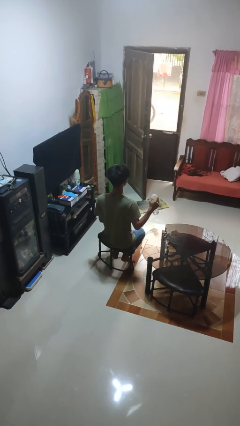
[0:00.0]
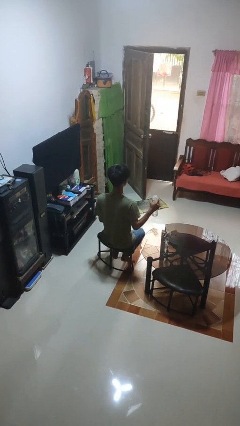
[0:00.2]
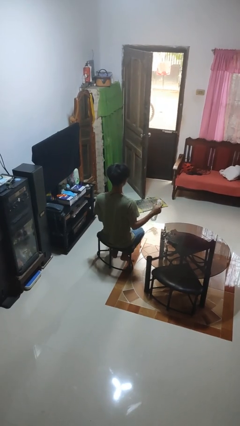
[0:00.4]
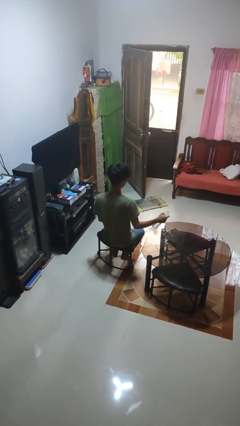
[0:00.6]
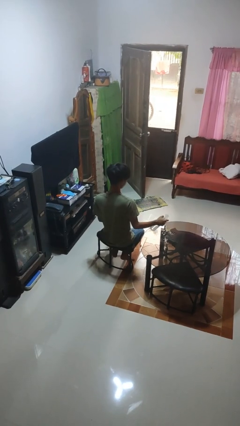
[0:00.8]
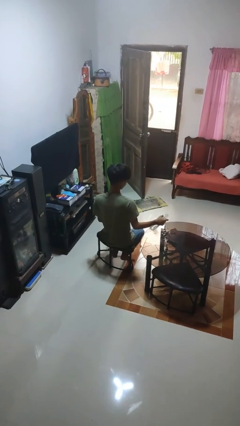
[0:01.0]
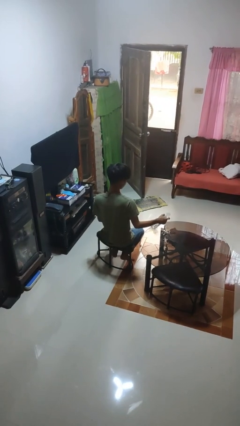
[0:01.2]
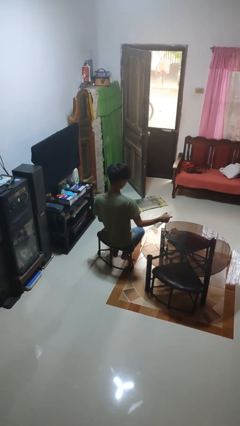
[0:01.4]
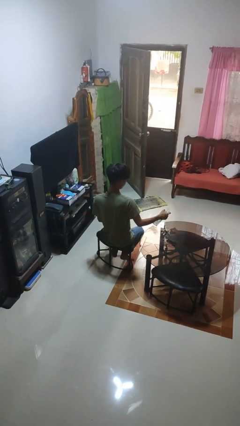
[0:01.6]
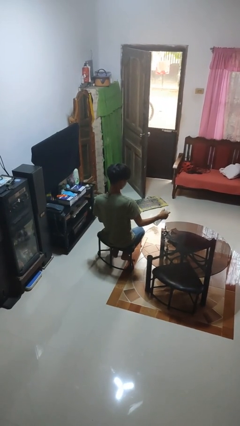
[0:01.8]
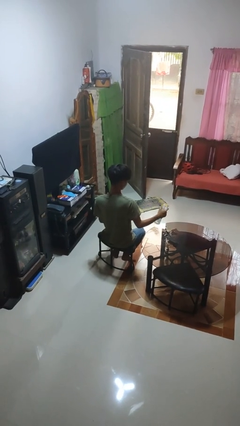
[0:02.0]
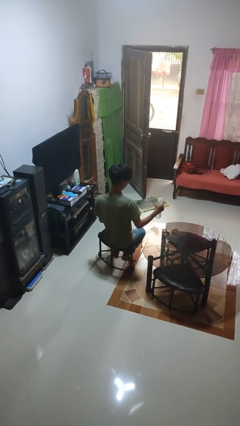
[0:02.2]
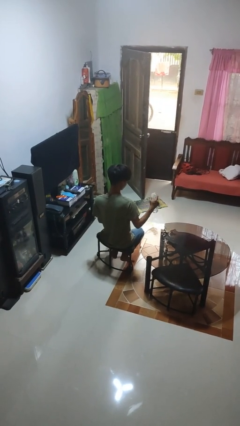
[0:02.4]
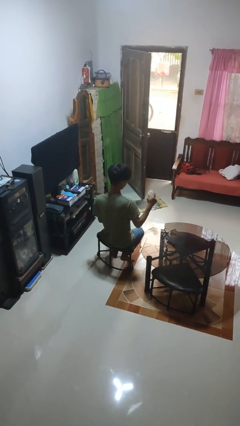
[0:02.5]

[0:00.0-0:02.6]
person sprays from bottle

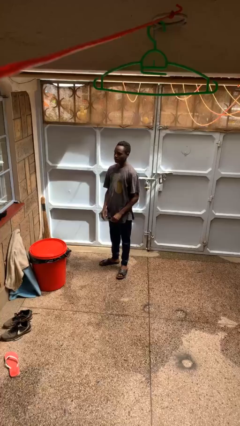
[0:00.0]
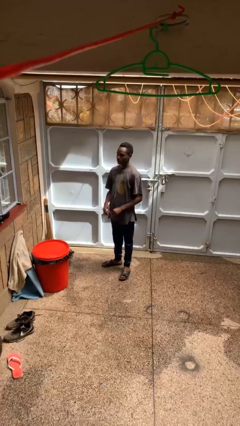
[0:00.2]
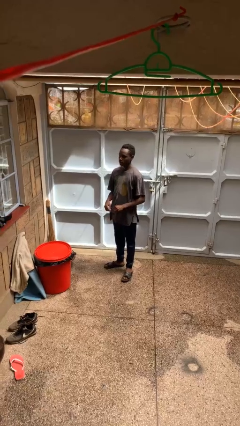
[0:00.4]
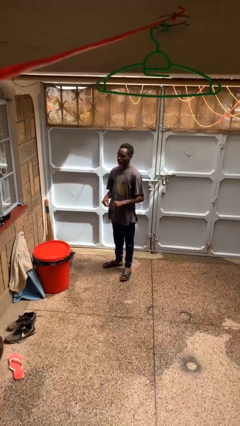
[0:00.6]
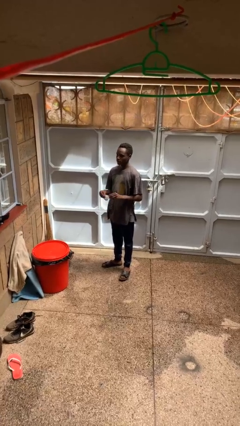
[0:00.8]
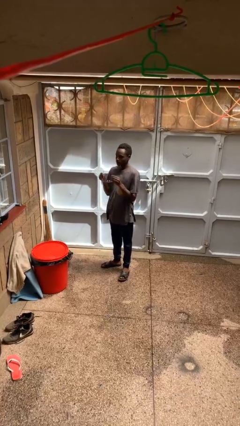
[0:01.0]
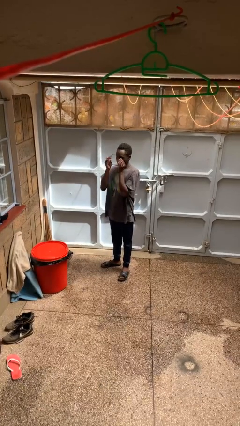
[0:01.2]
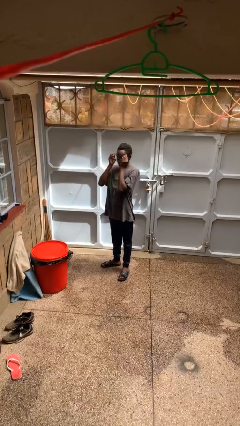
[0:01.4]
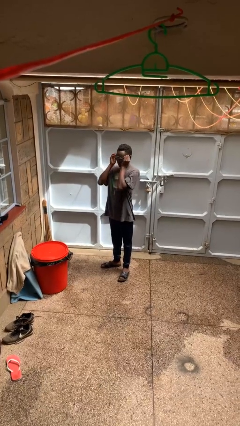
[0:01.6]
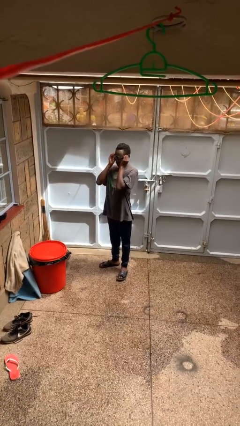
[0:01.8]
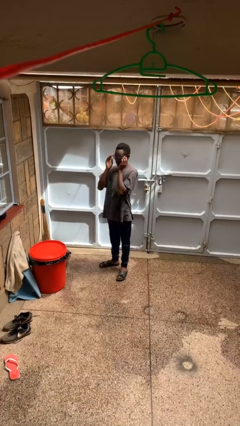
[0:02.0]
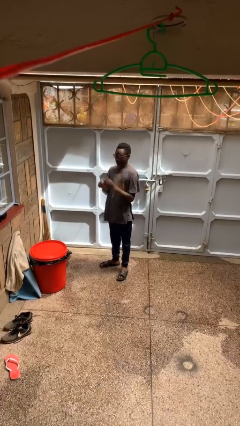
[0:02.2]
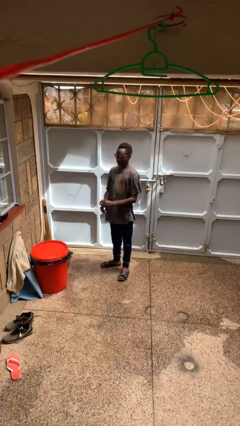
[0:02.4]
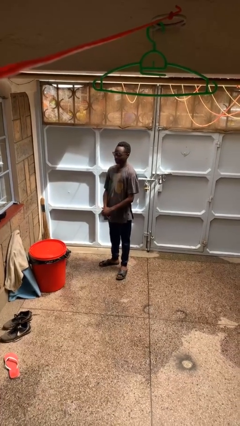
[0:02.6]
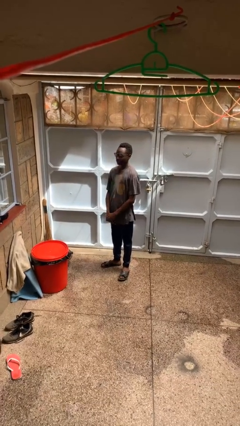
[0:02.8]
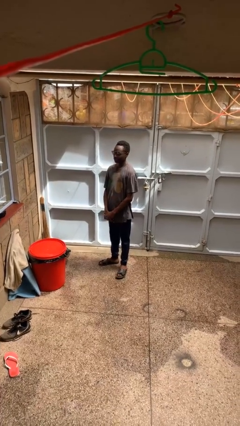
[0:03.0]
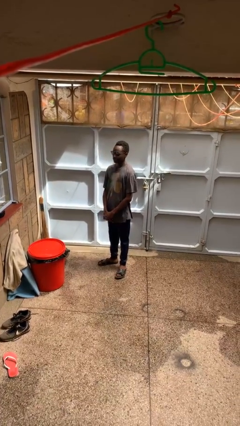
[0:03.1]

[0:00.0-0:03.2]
person puts on glasses

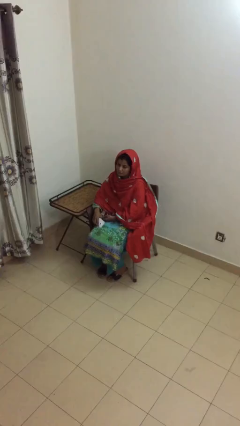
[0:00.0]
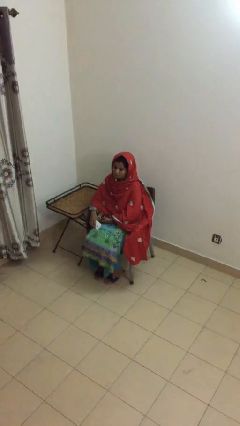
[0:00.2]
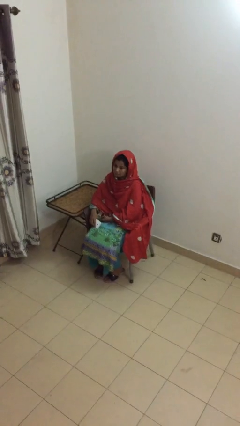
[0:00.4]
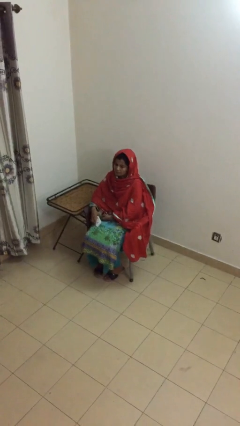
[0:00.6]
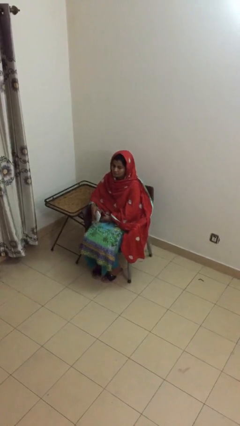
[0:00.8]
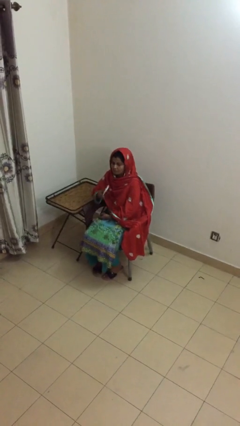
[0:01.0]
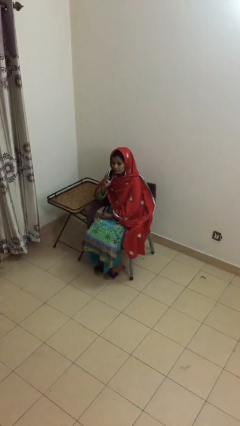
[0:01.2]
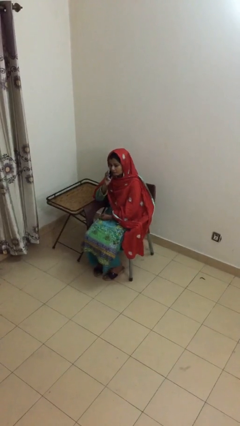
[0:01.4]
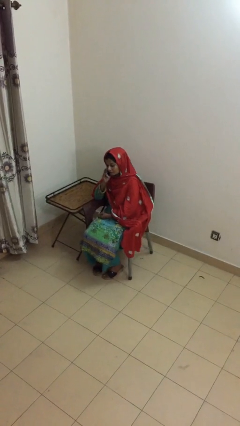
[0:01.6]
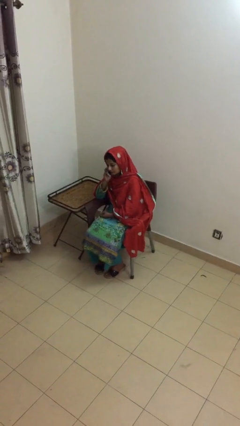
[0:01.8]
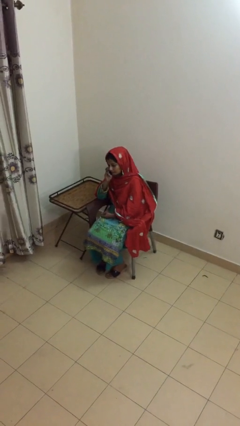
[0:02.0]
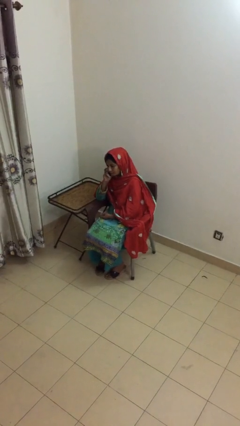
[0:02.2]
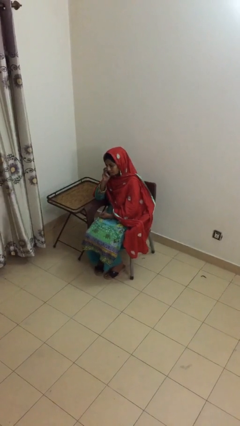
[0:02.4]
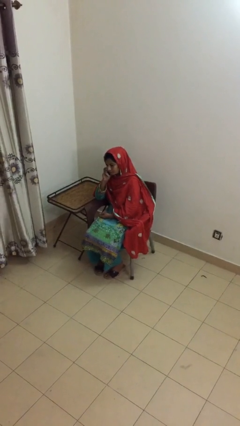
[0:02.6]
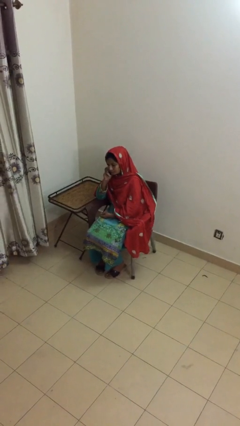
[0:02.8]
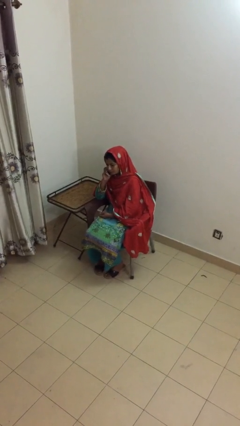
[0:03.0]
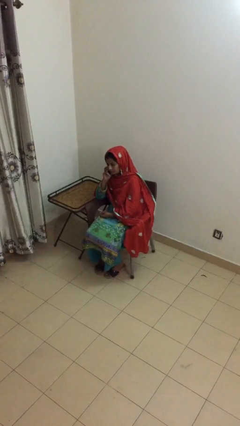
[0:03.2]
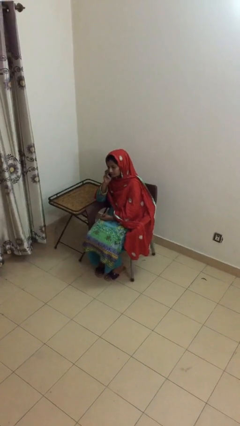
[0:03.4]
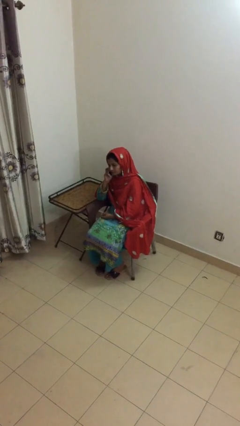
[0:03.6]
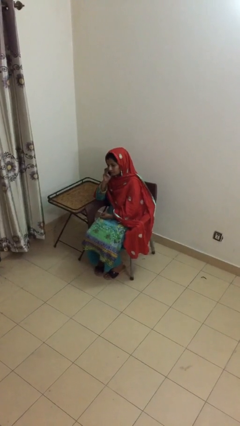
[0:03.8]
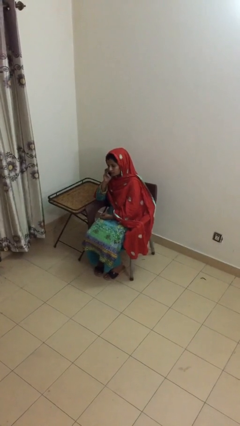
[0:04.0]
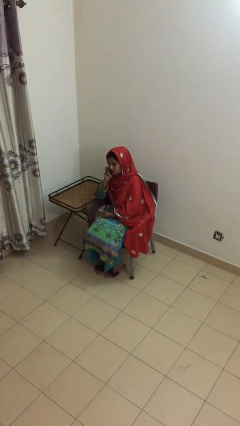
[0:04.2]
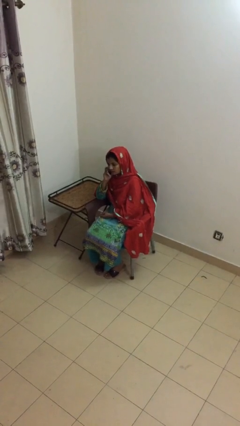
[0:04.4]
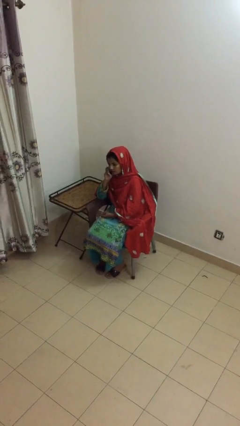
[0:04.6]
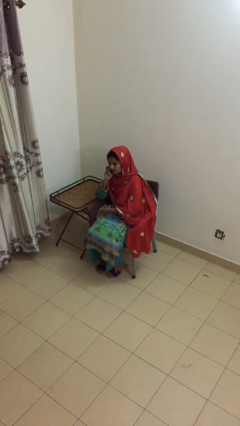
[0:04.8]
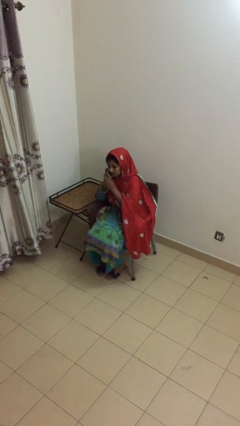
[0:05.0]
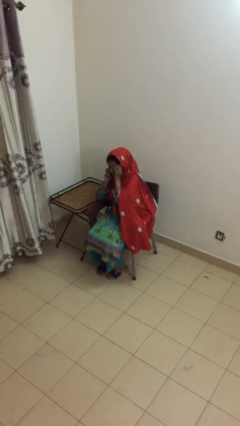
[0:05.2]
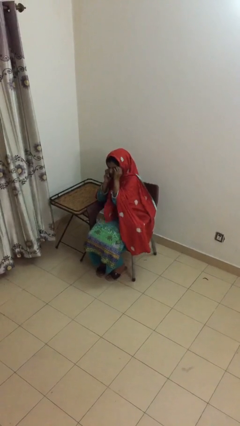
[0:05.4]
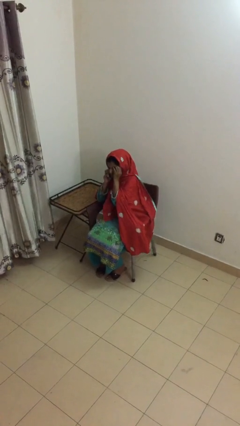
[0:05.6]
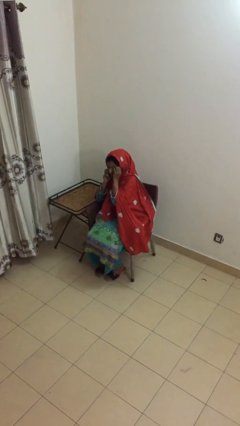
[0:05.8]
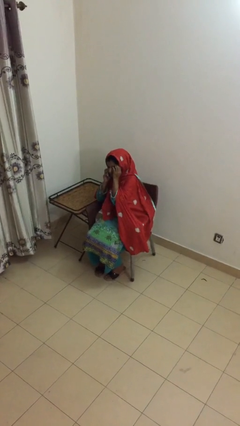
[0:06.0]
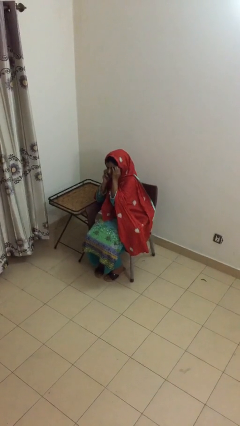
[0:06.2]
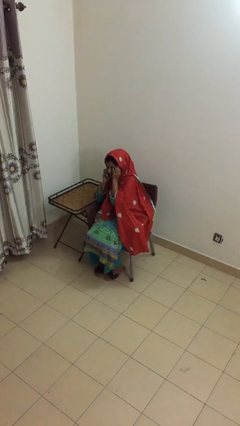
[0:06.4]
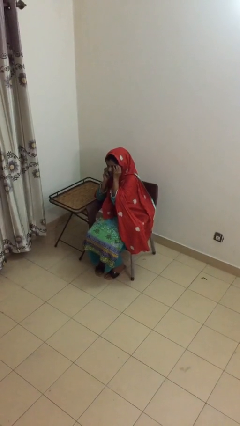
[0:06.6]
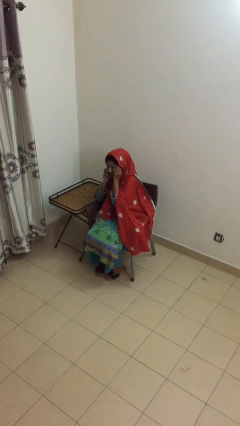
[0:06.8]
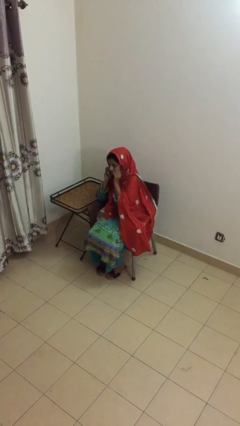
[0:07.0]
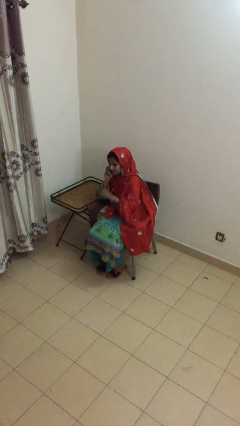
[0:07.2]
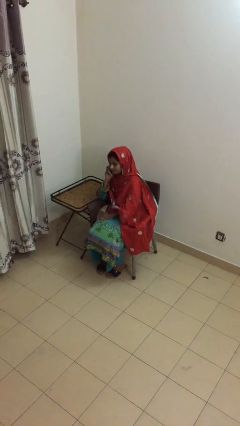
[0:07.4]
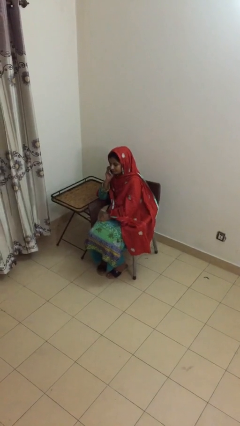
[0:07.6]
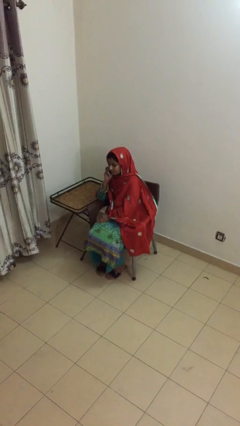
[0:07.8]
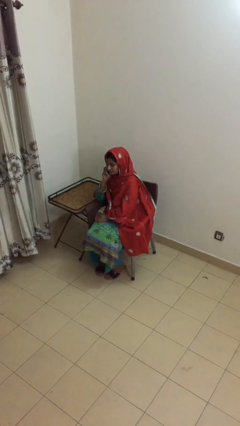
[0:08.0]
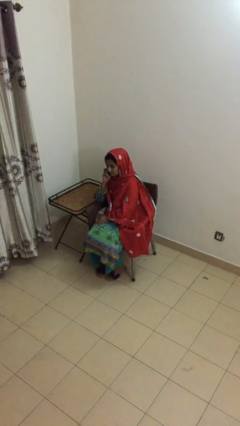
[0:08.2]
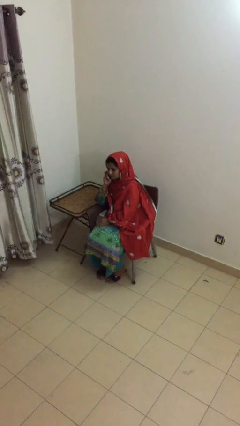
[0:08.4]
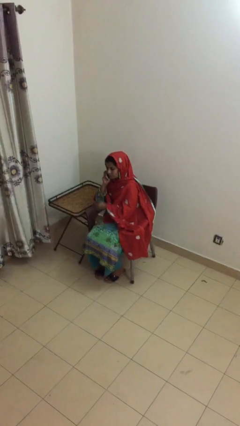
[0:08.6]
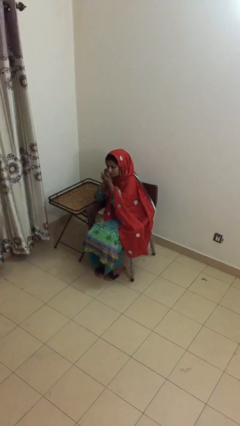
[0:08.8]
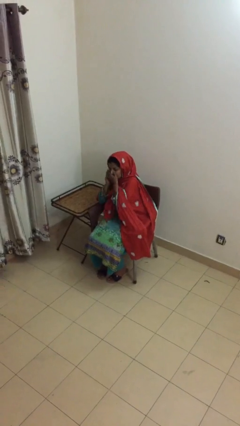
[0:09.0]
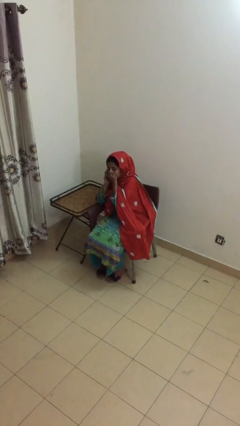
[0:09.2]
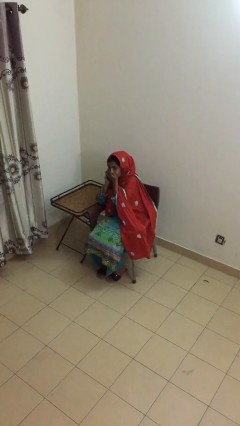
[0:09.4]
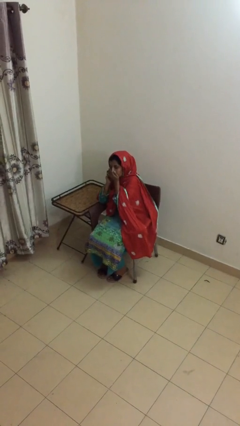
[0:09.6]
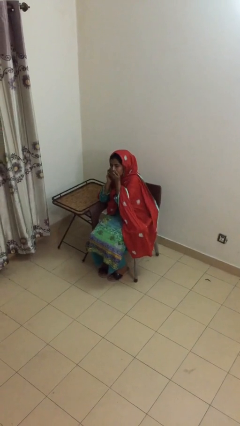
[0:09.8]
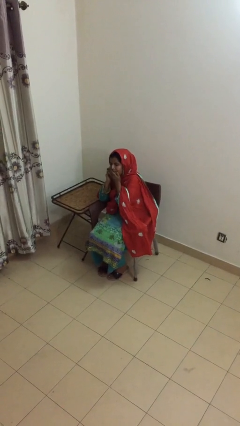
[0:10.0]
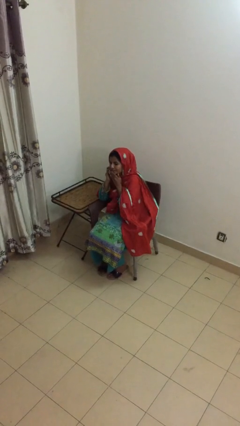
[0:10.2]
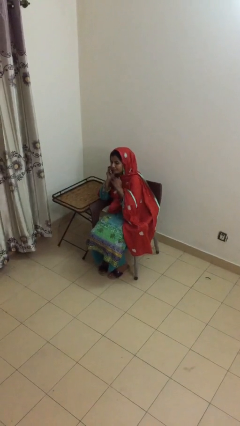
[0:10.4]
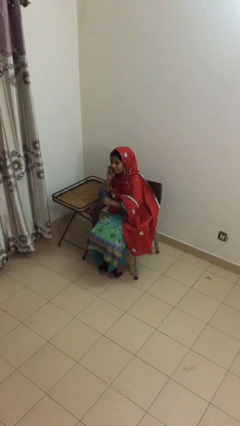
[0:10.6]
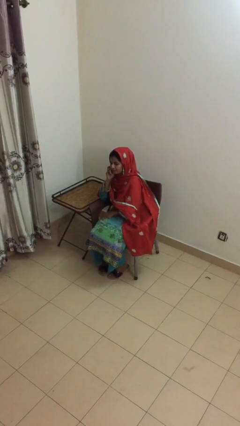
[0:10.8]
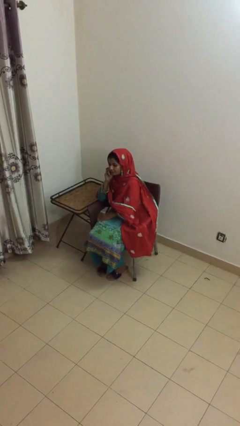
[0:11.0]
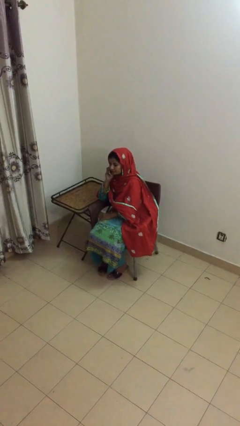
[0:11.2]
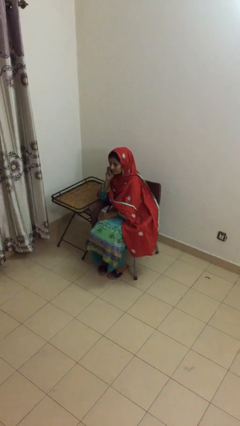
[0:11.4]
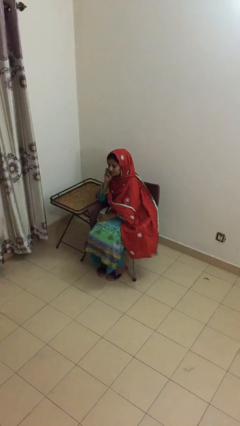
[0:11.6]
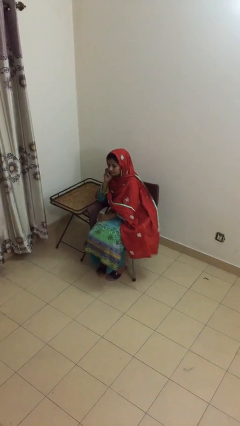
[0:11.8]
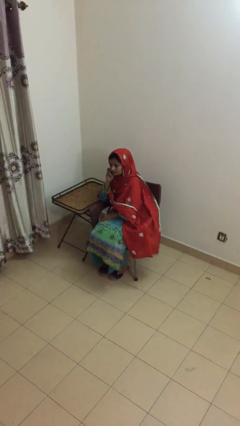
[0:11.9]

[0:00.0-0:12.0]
person talks on phone
